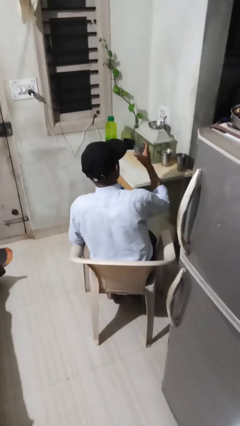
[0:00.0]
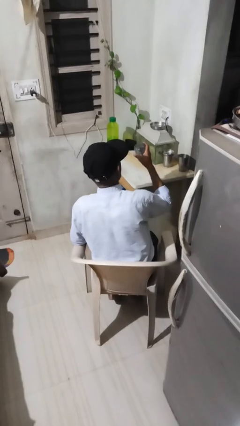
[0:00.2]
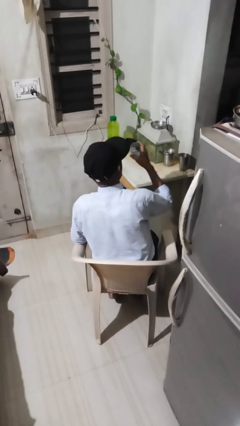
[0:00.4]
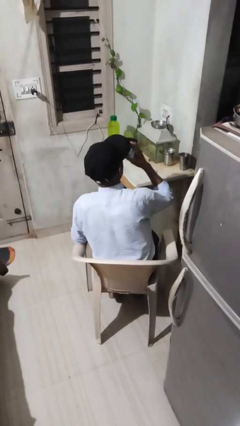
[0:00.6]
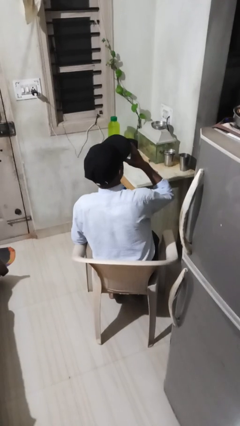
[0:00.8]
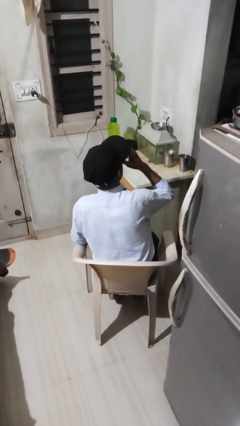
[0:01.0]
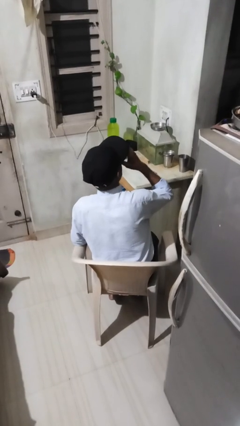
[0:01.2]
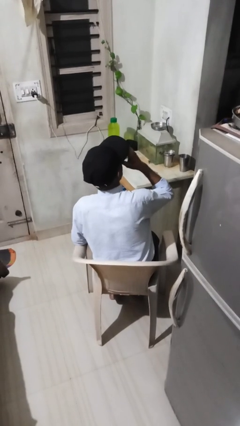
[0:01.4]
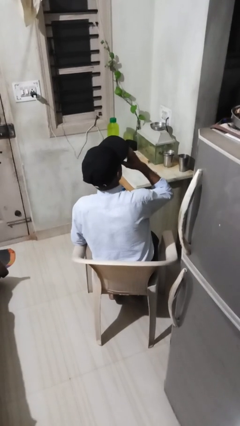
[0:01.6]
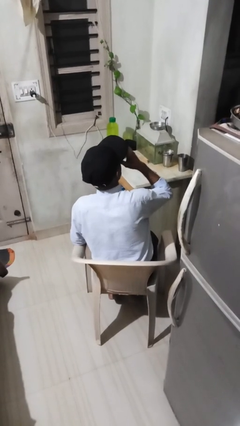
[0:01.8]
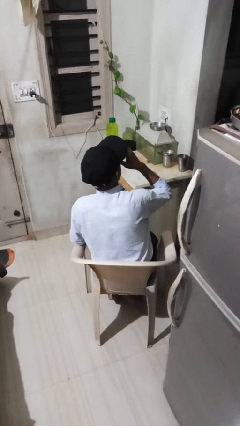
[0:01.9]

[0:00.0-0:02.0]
person drinks from shotglass

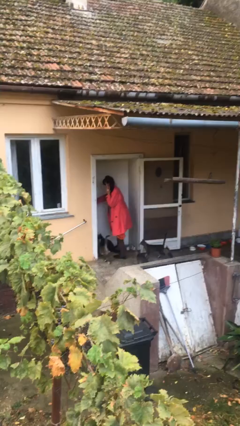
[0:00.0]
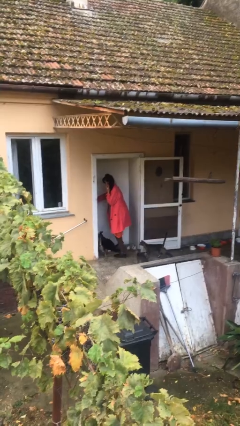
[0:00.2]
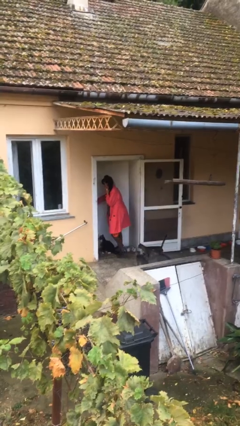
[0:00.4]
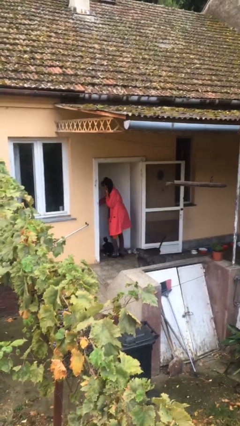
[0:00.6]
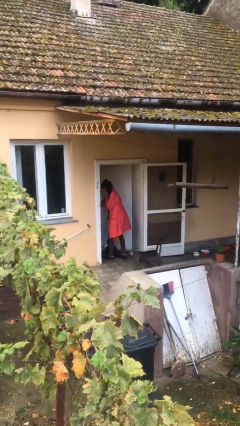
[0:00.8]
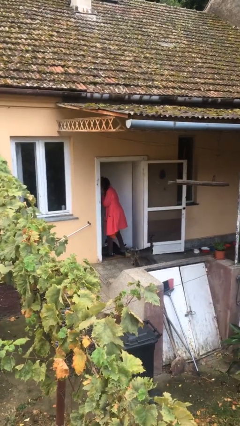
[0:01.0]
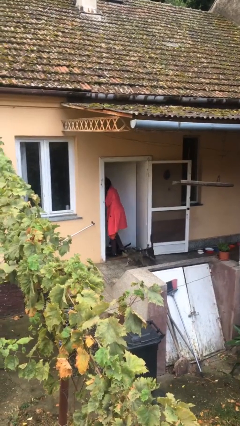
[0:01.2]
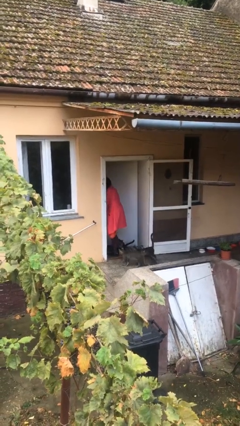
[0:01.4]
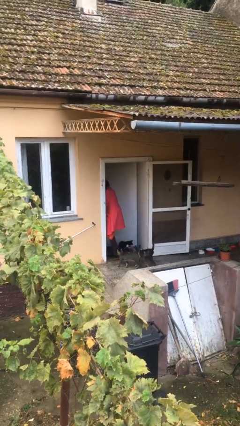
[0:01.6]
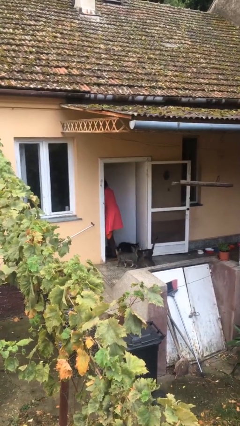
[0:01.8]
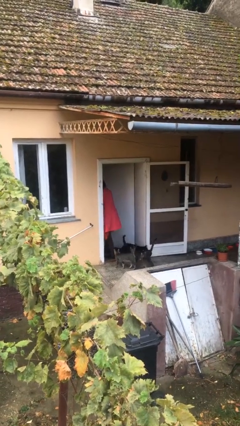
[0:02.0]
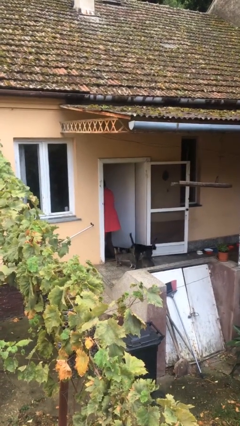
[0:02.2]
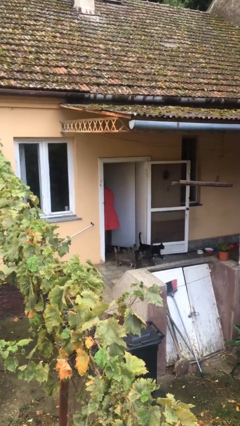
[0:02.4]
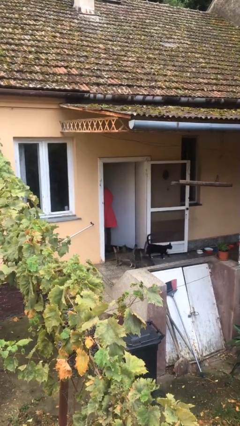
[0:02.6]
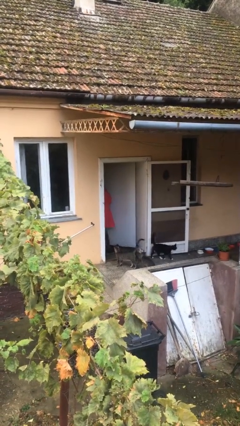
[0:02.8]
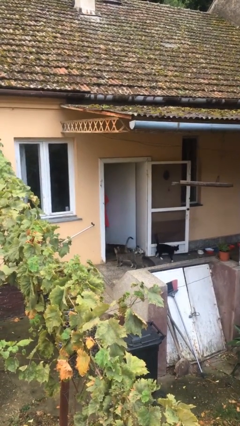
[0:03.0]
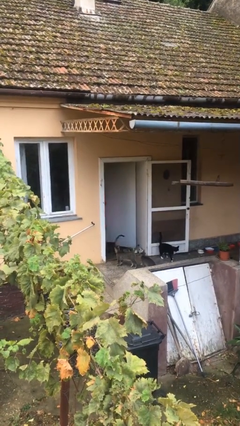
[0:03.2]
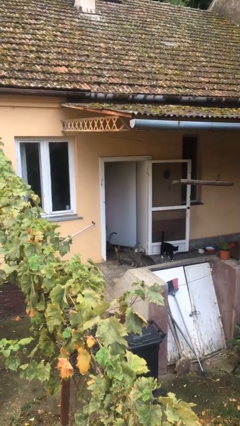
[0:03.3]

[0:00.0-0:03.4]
person exits scene through structure

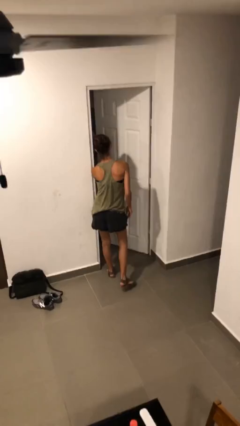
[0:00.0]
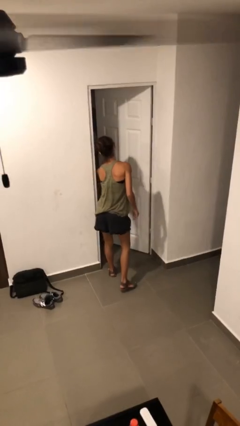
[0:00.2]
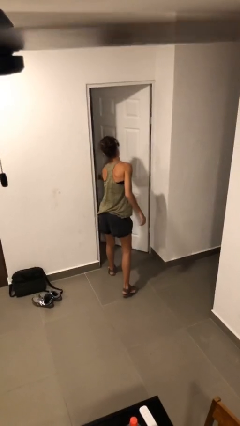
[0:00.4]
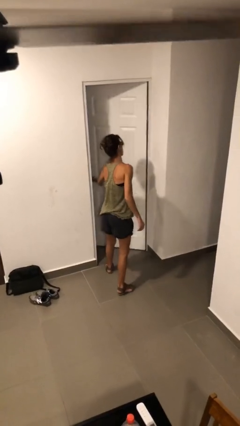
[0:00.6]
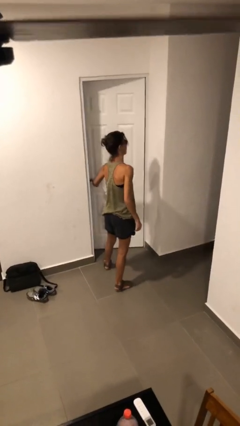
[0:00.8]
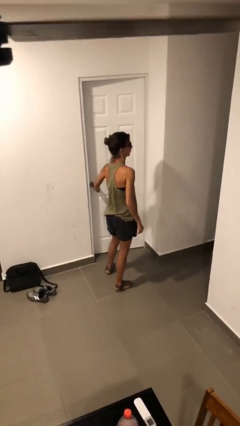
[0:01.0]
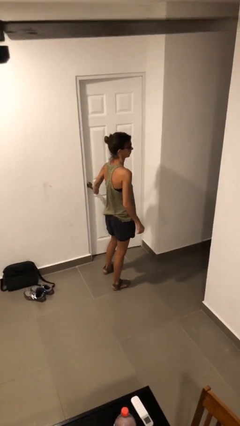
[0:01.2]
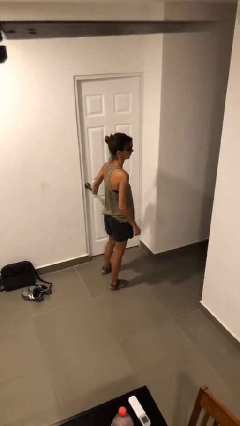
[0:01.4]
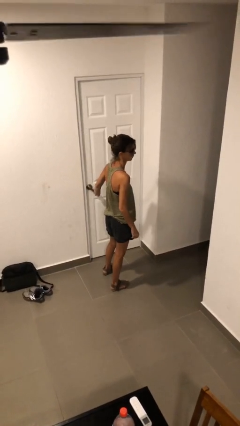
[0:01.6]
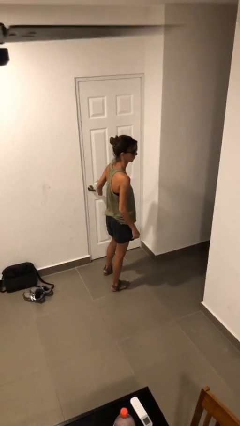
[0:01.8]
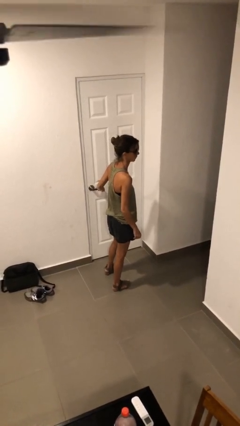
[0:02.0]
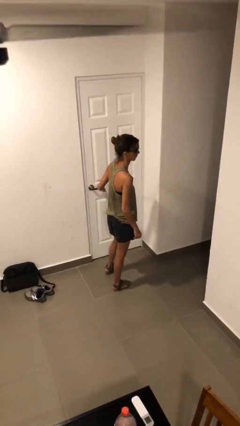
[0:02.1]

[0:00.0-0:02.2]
person closes facility door

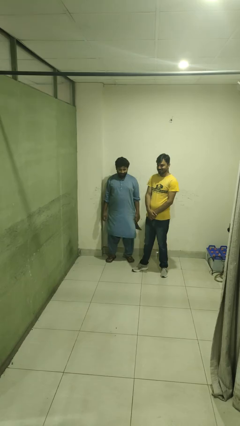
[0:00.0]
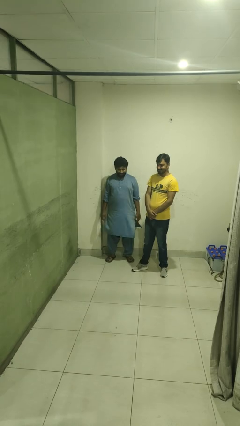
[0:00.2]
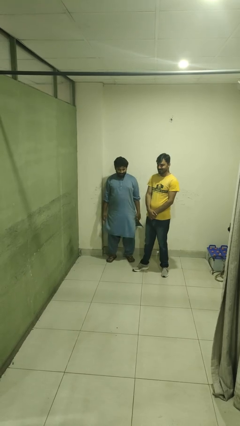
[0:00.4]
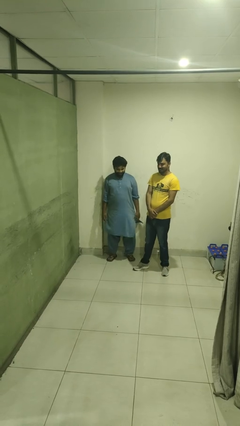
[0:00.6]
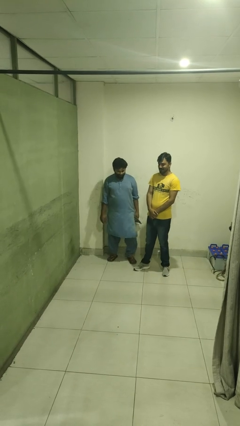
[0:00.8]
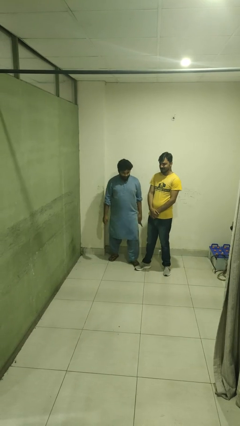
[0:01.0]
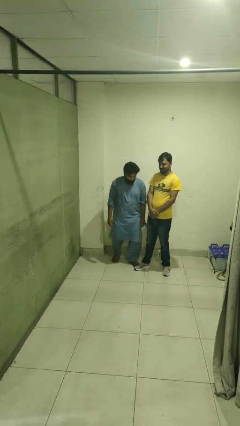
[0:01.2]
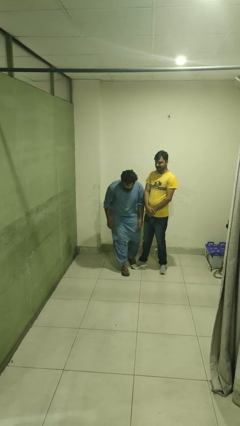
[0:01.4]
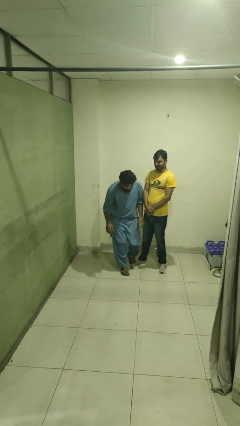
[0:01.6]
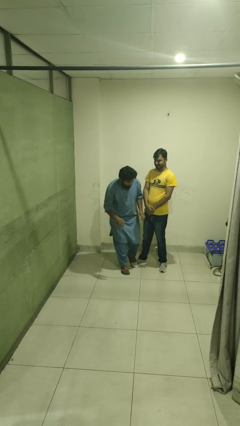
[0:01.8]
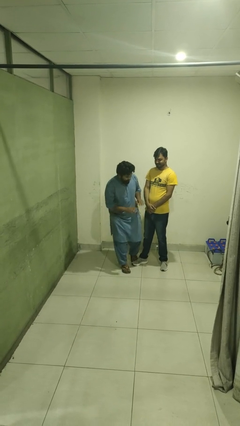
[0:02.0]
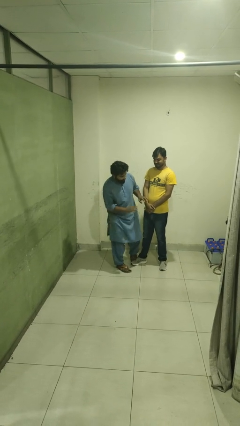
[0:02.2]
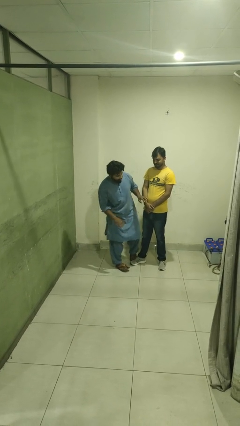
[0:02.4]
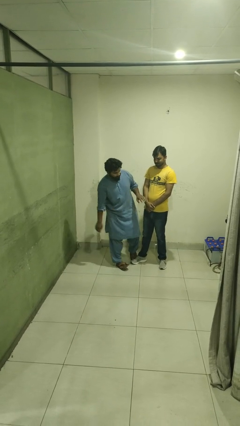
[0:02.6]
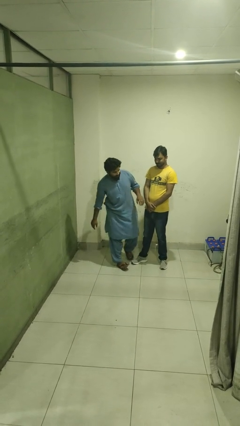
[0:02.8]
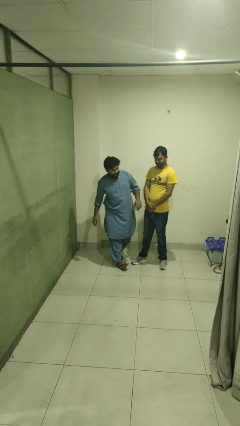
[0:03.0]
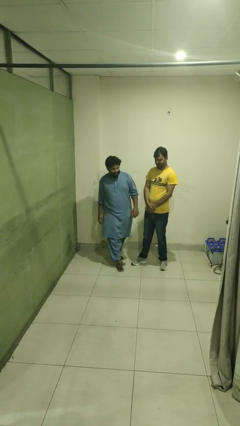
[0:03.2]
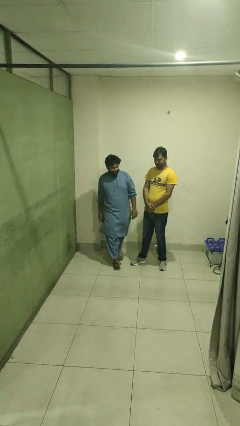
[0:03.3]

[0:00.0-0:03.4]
person bumps into person

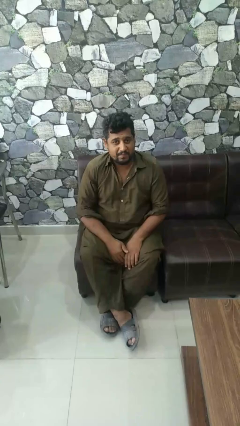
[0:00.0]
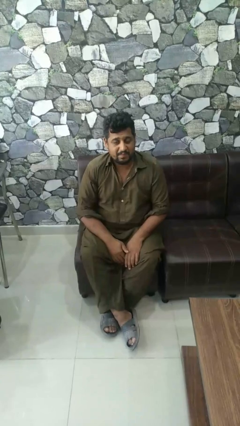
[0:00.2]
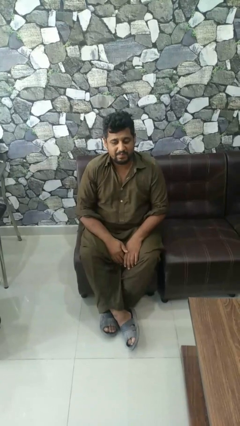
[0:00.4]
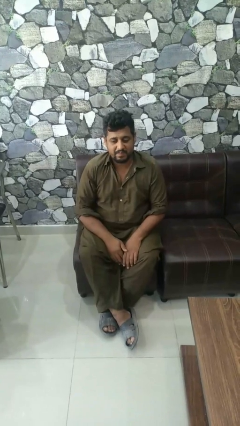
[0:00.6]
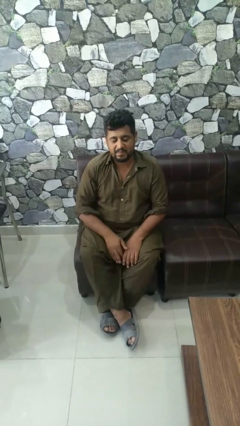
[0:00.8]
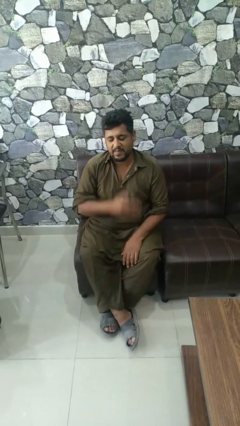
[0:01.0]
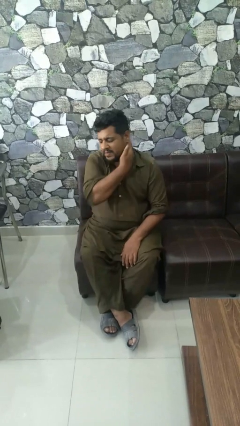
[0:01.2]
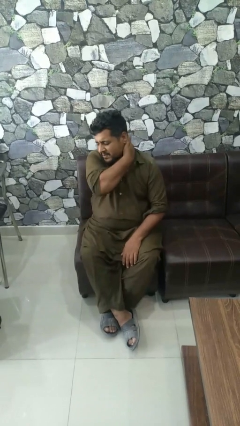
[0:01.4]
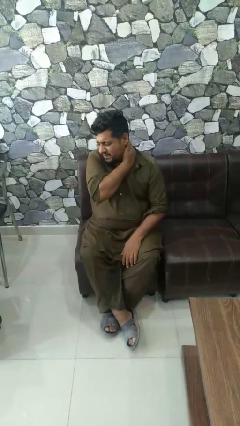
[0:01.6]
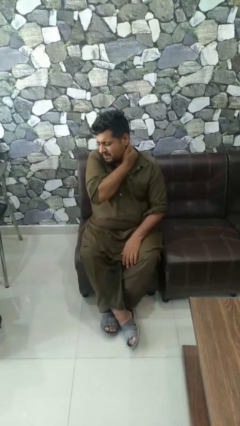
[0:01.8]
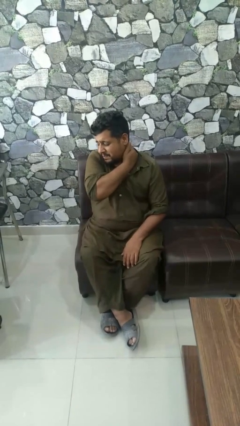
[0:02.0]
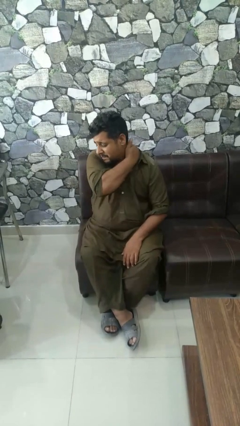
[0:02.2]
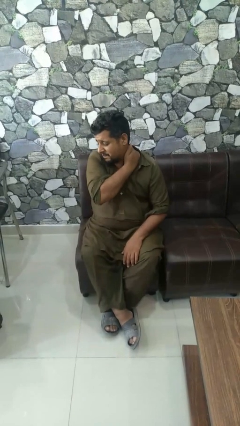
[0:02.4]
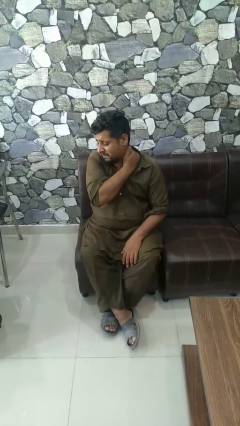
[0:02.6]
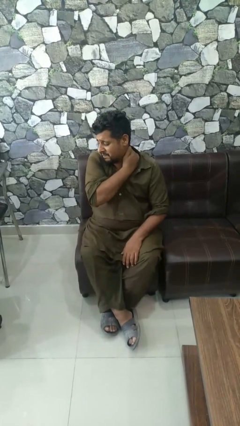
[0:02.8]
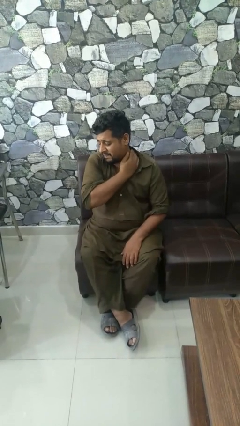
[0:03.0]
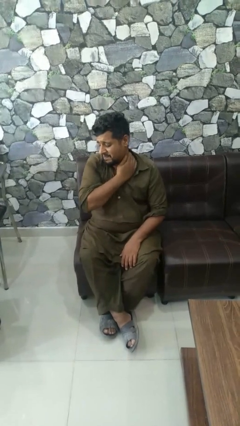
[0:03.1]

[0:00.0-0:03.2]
person rubs neck

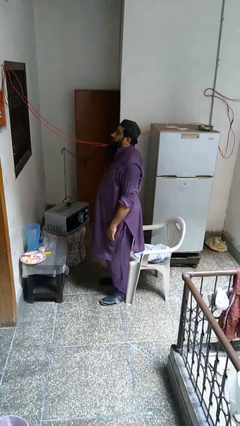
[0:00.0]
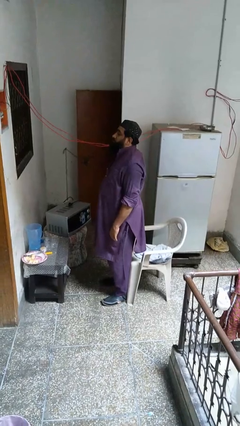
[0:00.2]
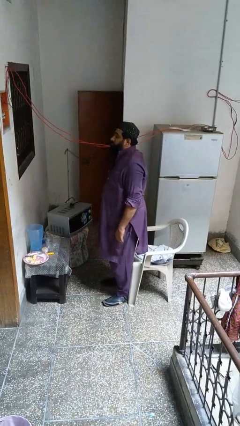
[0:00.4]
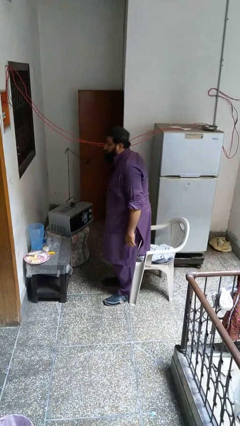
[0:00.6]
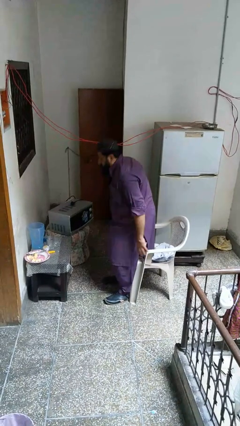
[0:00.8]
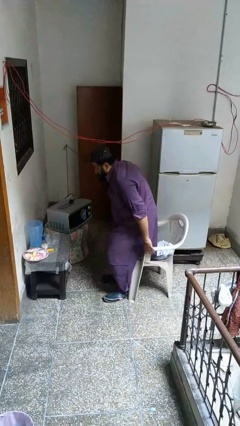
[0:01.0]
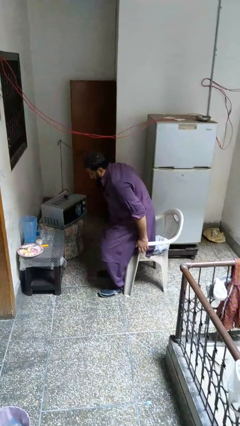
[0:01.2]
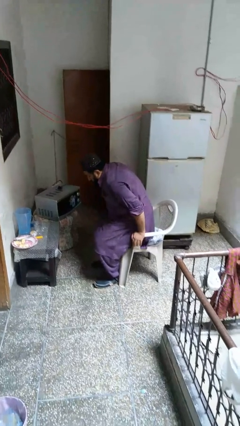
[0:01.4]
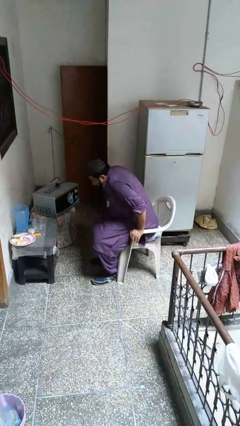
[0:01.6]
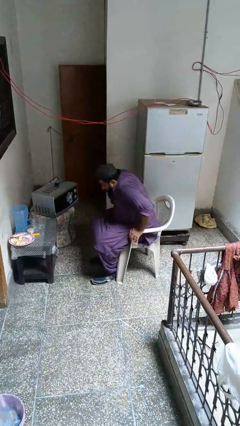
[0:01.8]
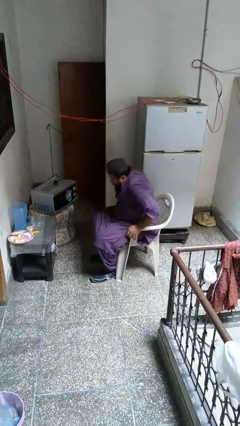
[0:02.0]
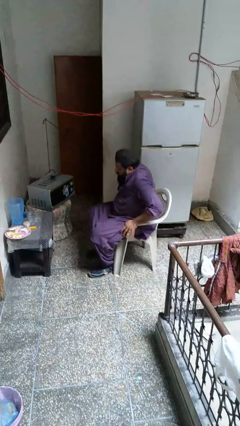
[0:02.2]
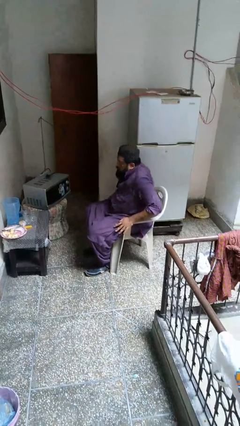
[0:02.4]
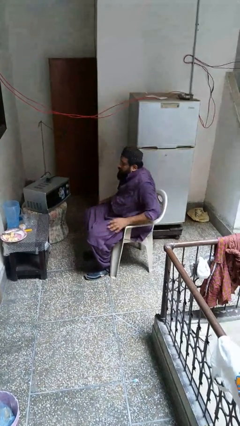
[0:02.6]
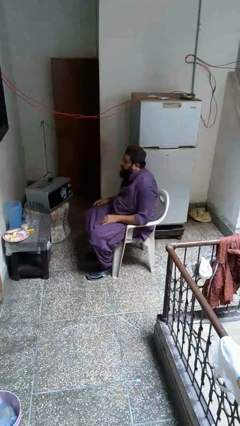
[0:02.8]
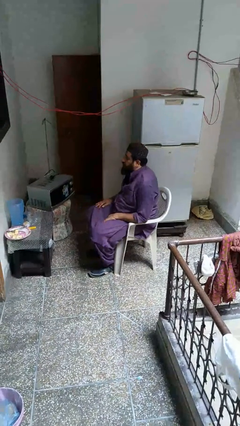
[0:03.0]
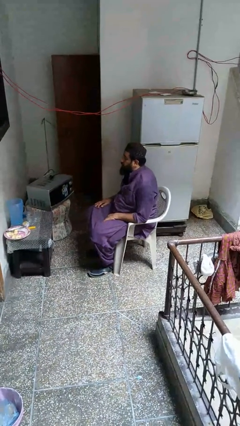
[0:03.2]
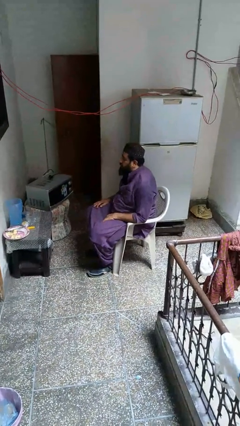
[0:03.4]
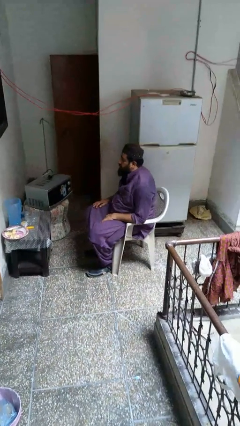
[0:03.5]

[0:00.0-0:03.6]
person sits down
